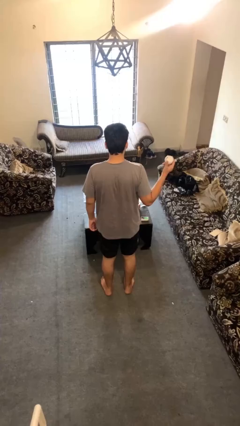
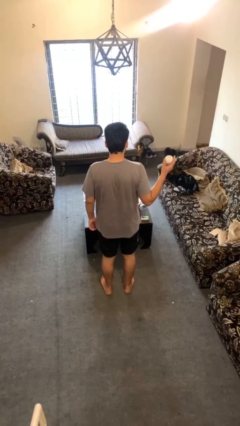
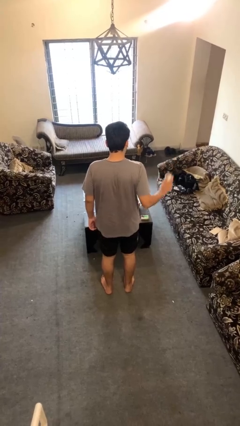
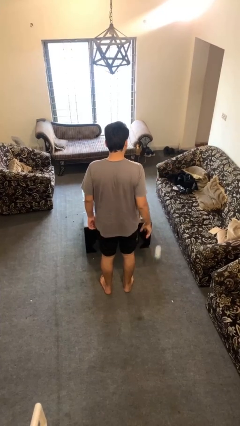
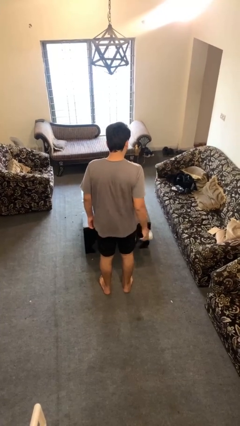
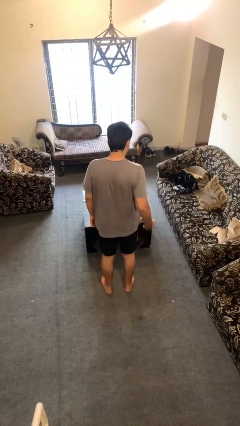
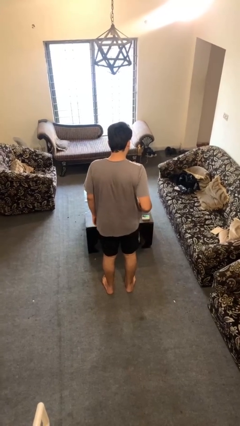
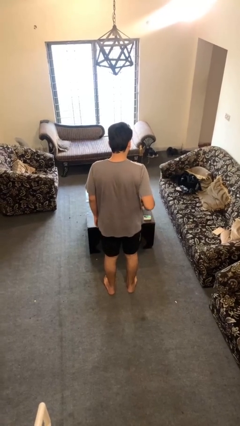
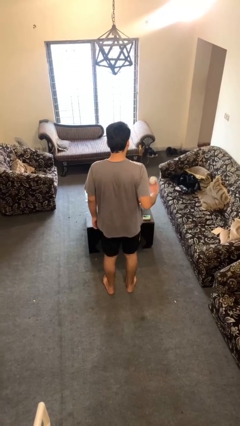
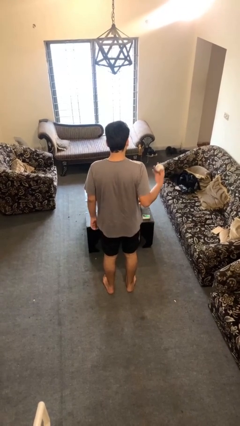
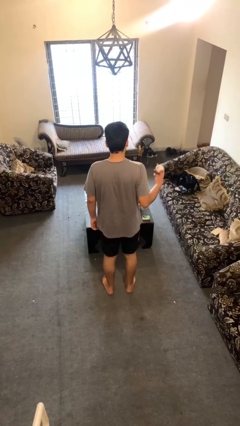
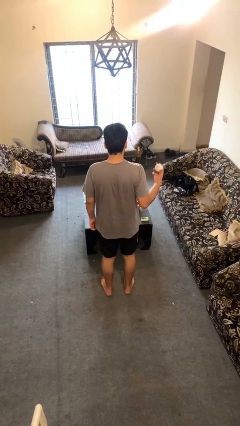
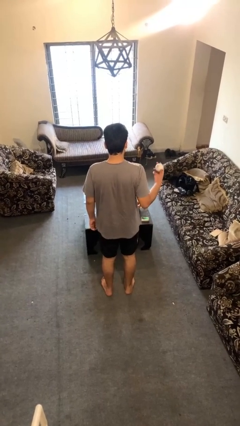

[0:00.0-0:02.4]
person bounces ball on floor

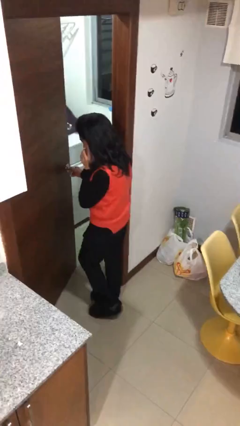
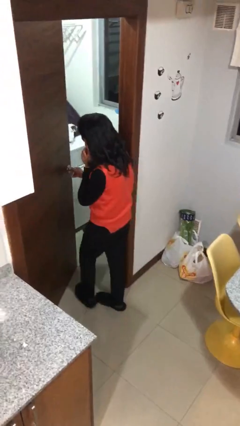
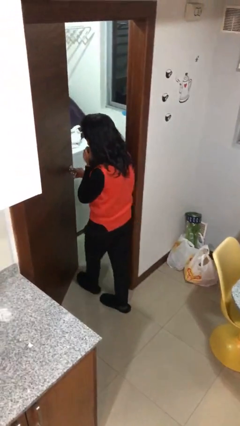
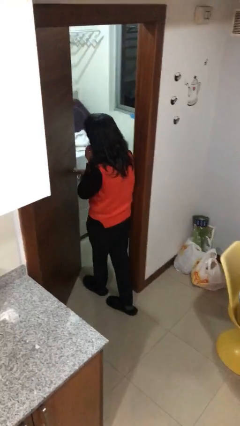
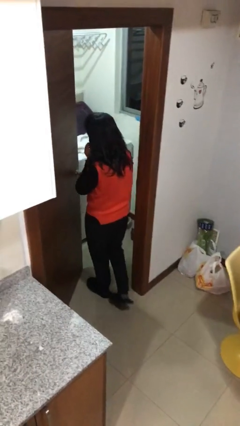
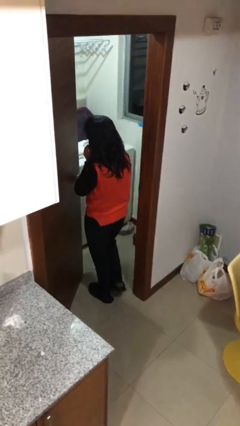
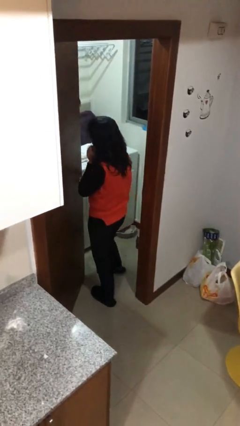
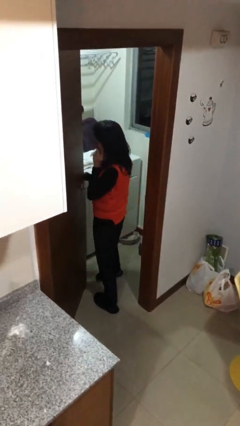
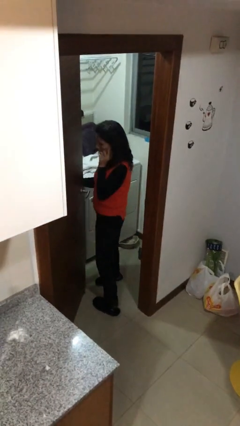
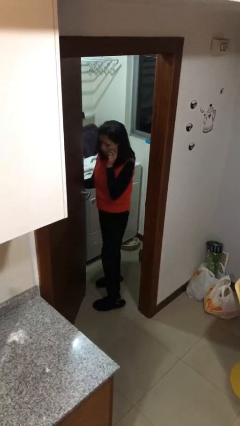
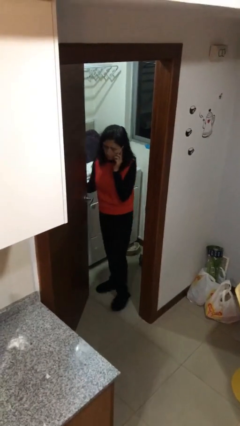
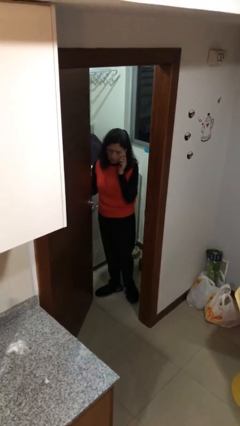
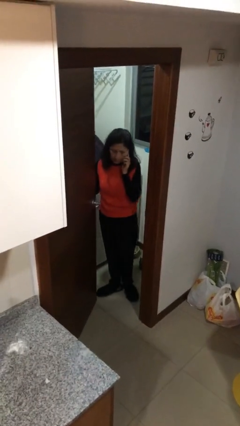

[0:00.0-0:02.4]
person exits scene through structure

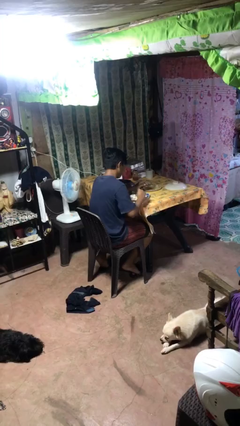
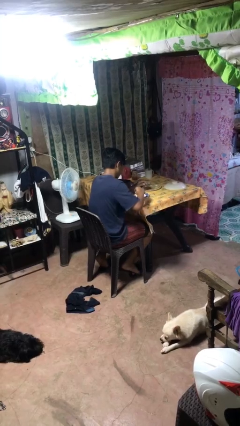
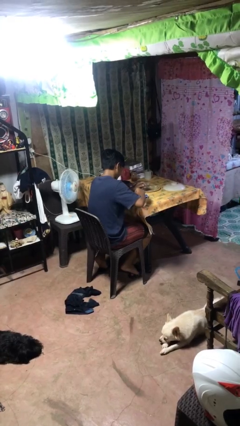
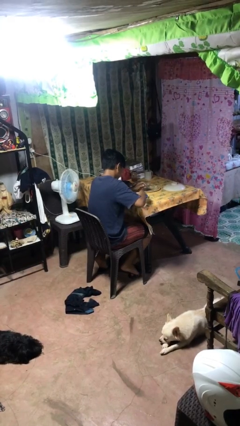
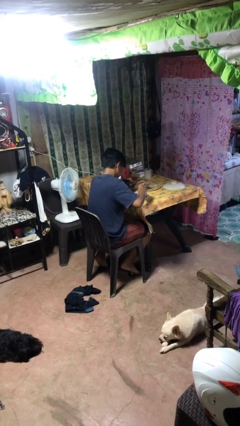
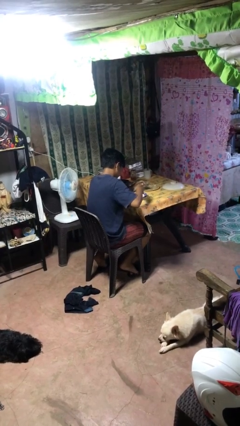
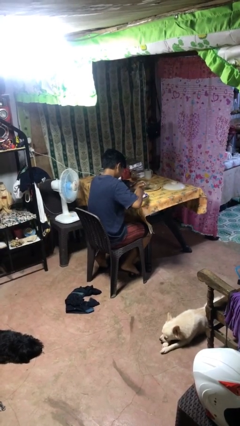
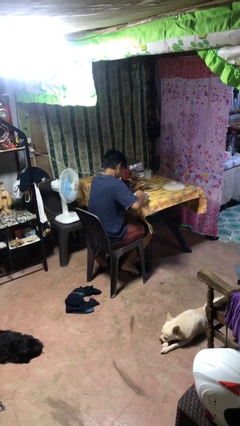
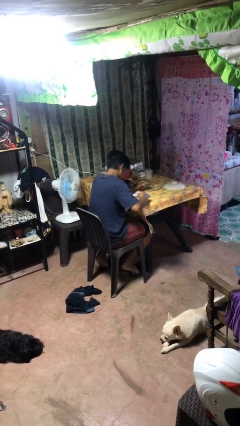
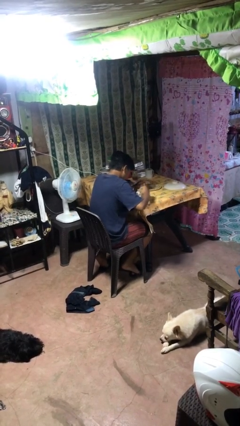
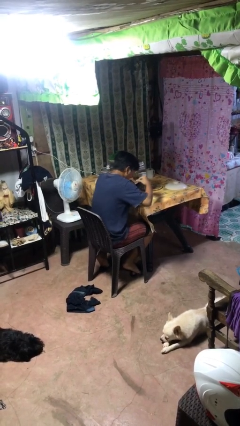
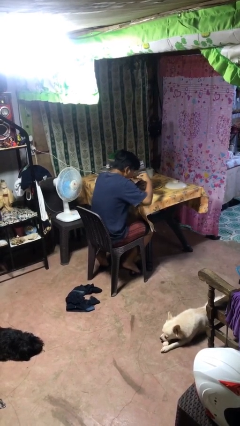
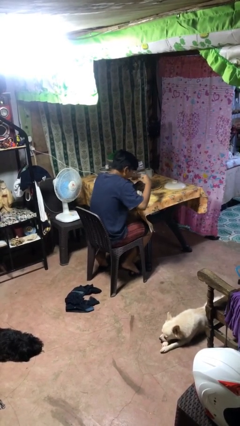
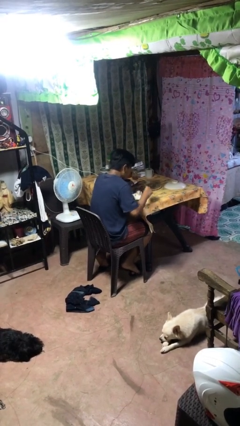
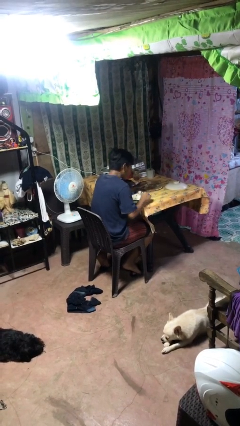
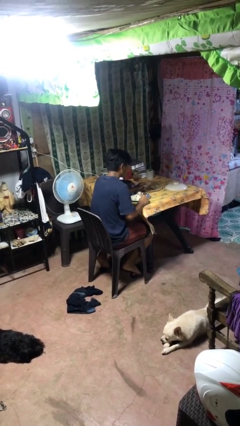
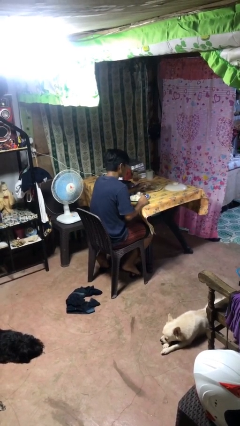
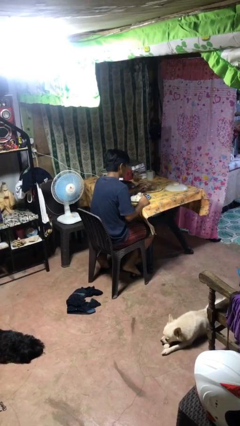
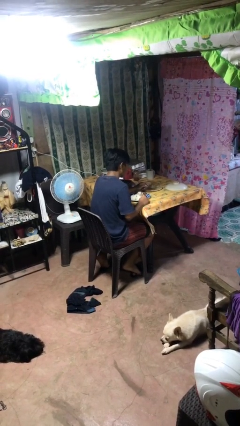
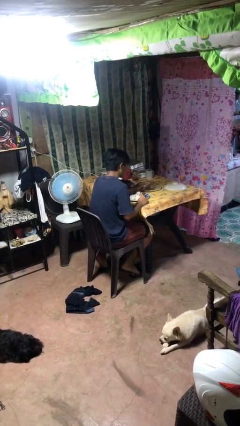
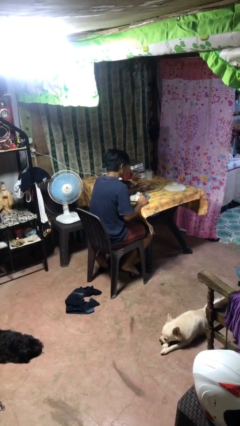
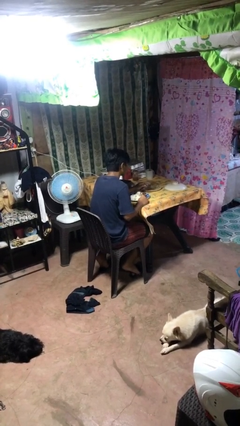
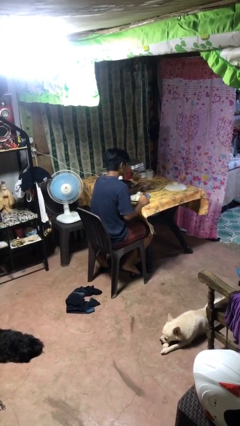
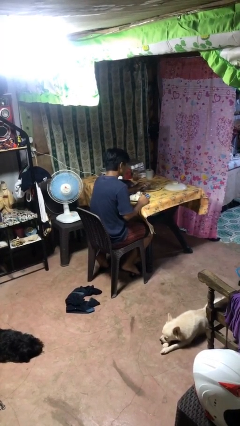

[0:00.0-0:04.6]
person eats with utensil

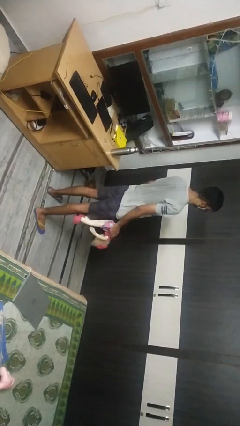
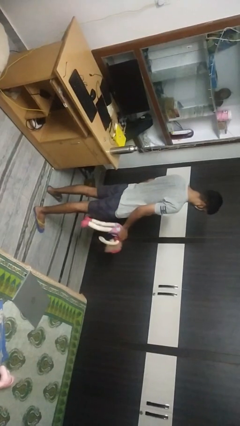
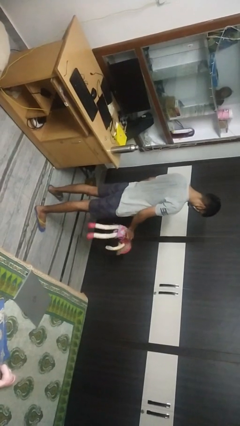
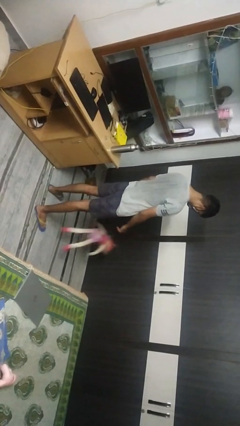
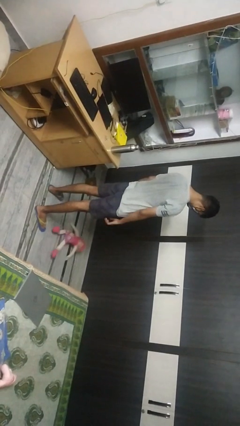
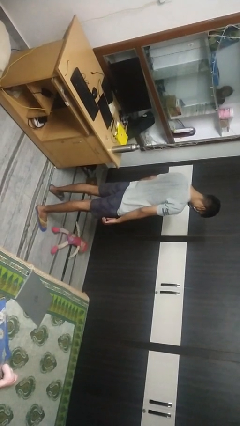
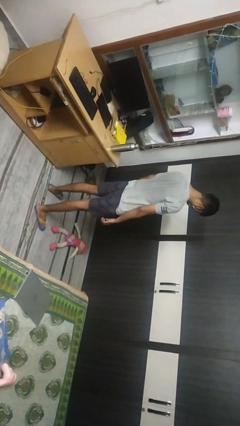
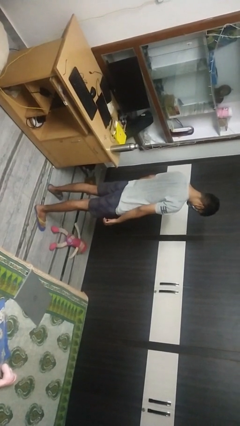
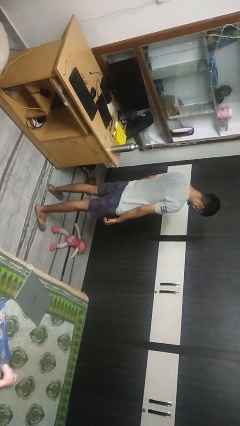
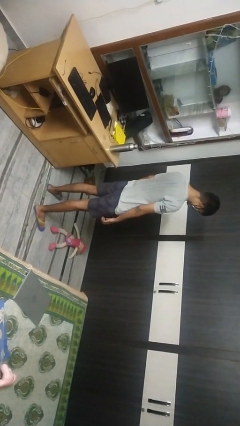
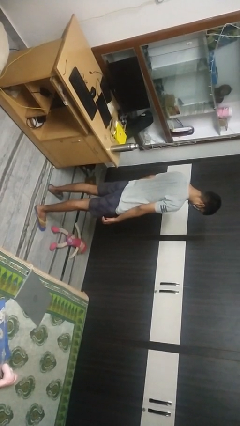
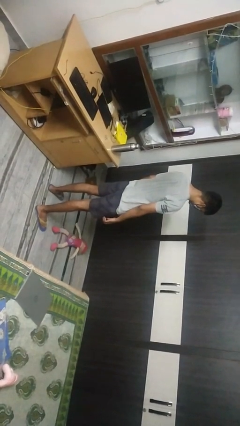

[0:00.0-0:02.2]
person drops object

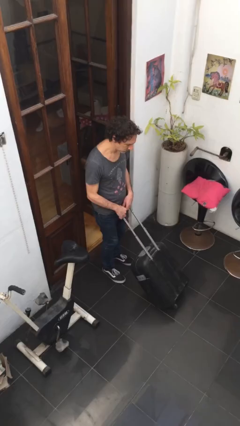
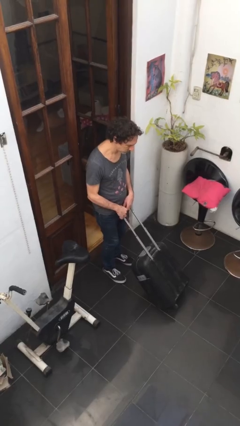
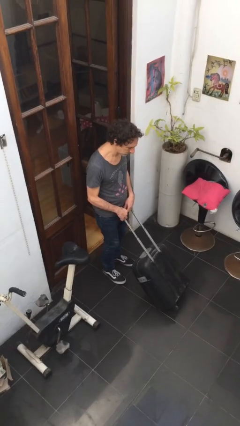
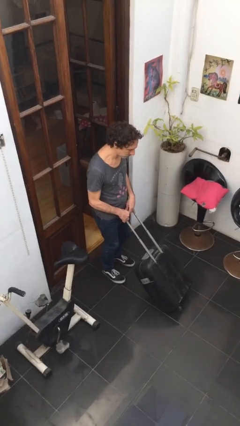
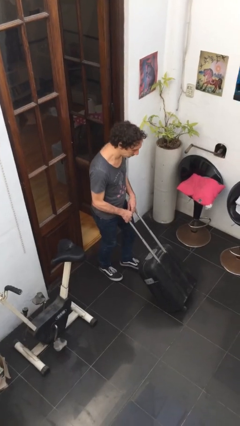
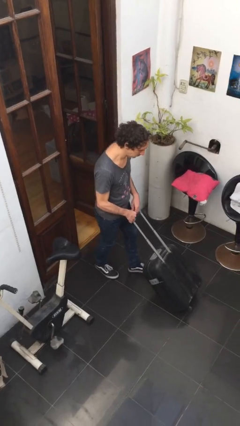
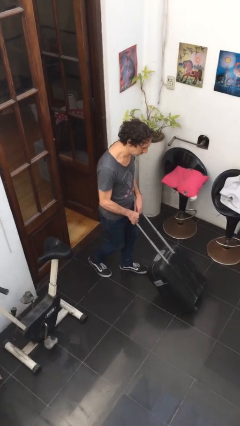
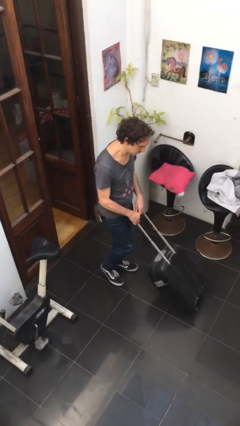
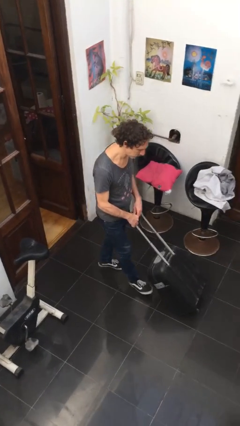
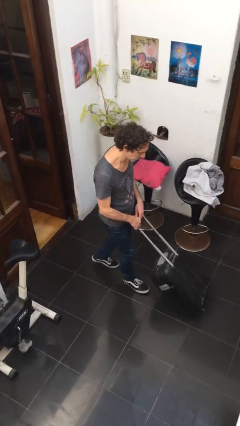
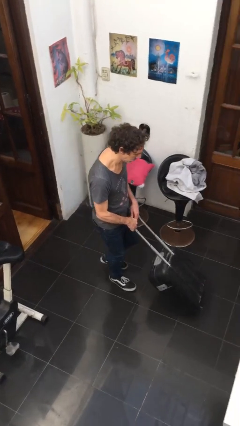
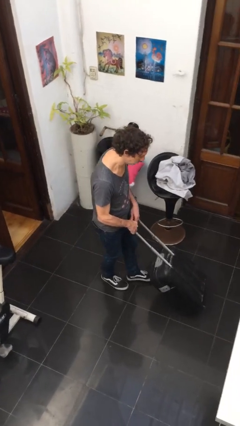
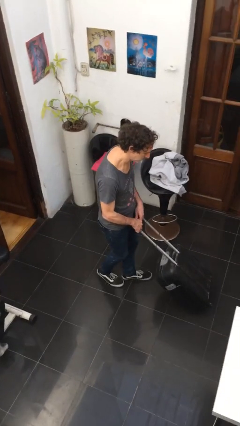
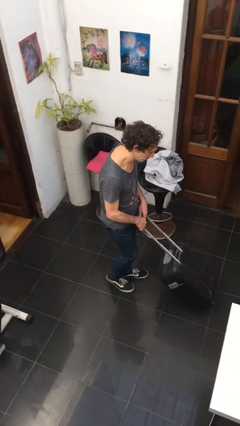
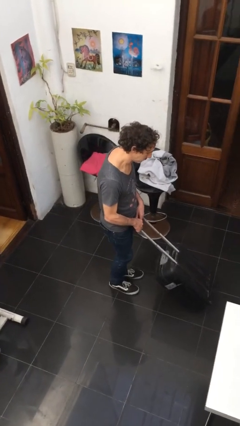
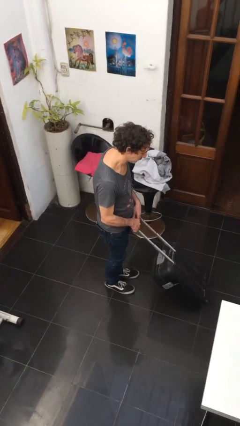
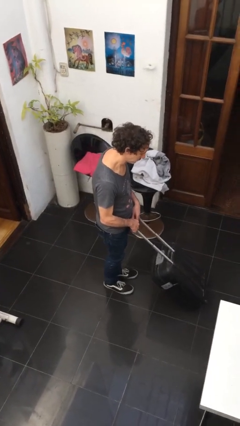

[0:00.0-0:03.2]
person pushes wheeled cart

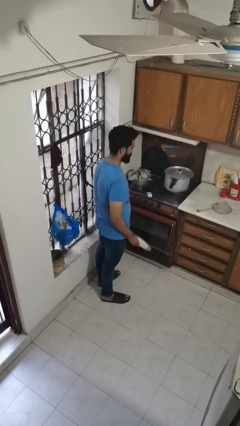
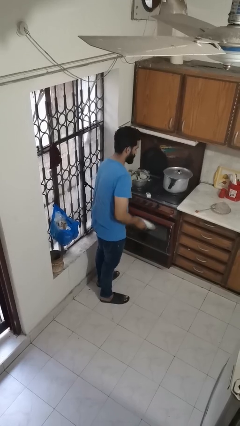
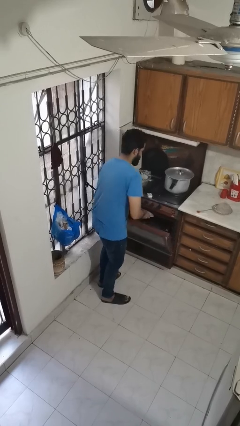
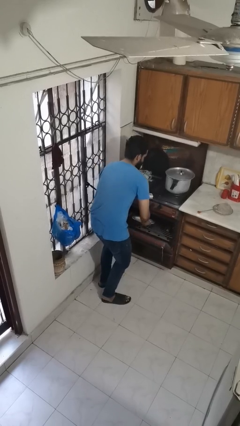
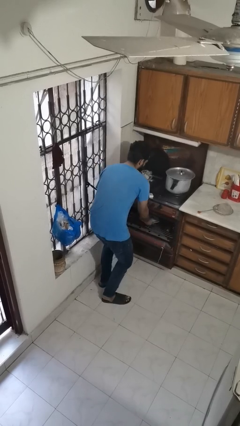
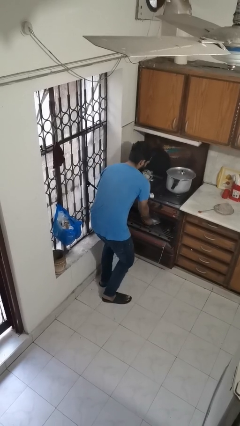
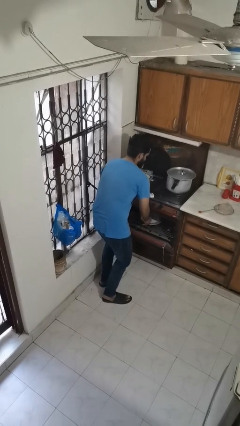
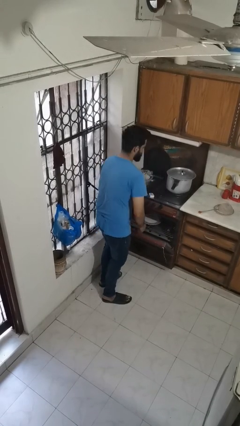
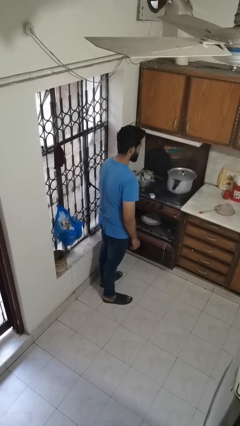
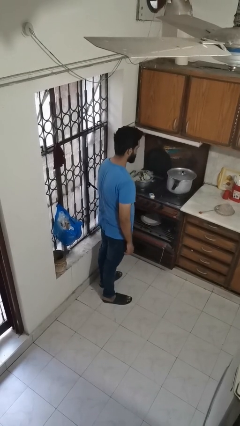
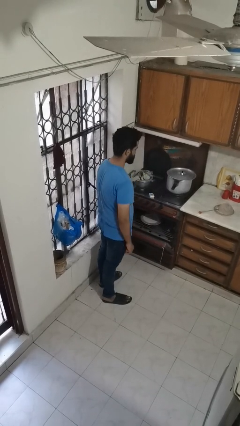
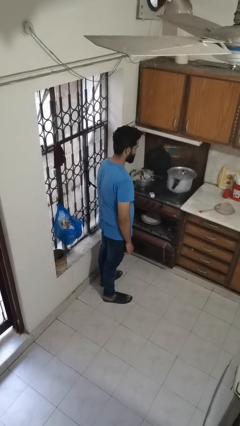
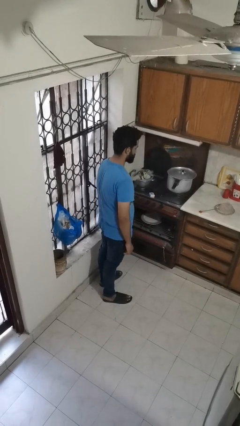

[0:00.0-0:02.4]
person puts object into oven
